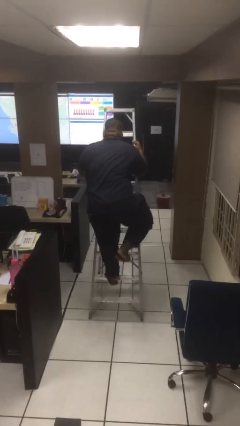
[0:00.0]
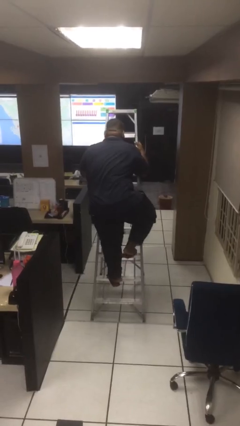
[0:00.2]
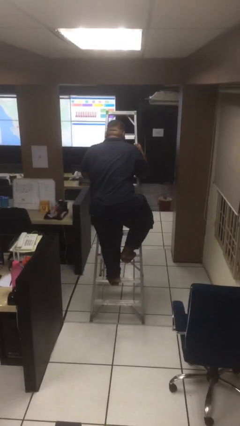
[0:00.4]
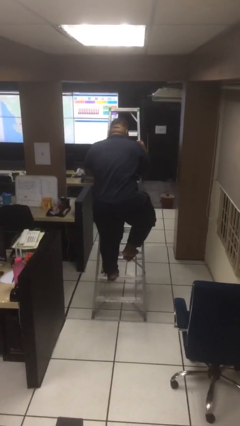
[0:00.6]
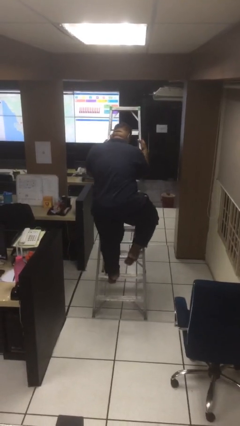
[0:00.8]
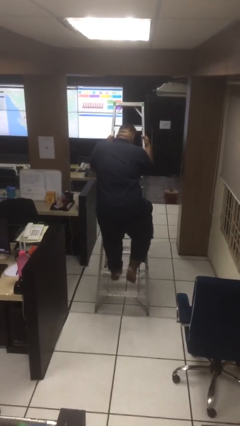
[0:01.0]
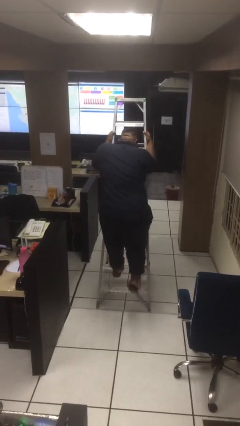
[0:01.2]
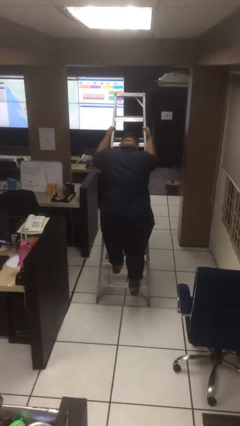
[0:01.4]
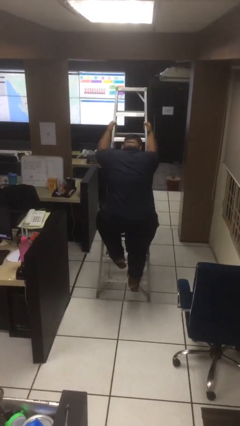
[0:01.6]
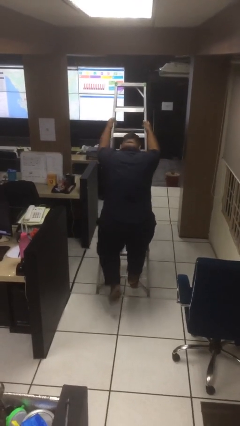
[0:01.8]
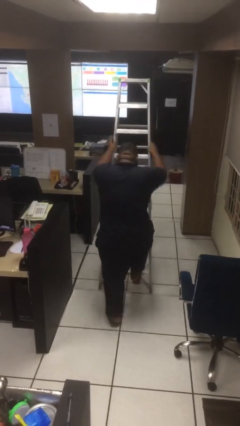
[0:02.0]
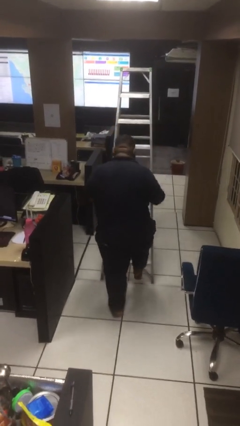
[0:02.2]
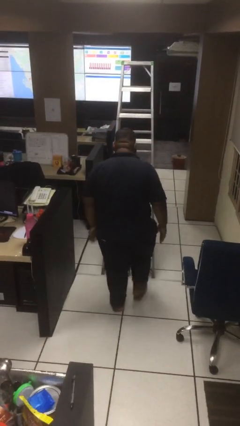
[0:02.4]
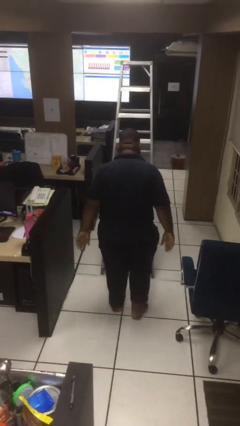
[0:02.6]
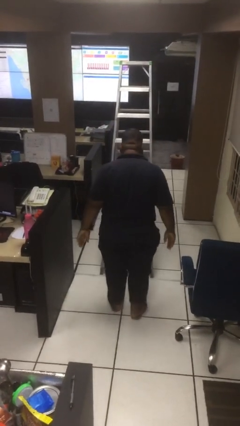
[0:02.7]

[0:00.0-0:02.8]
person climbs down ladder

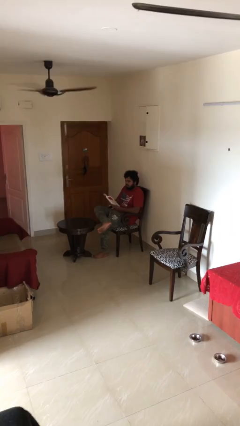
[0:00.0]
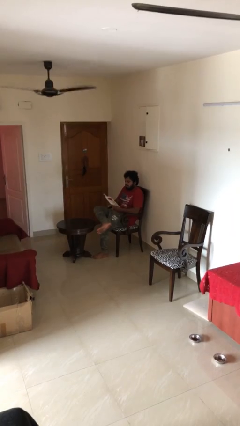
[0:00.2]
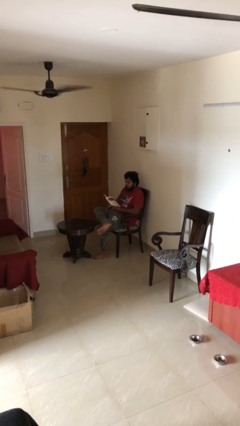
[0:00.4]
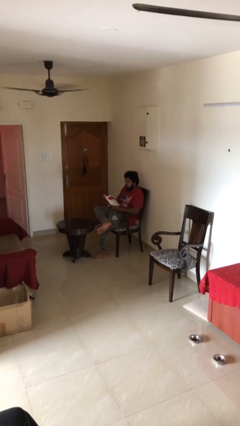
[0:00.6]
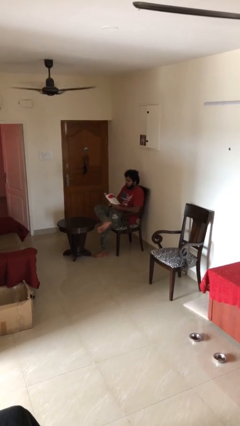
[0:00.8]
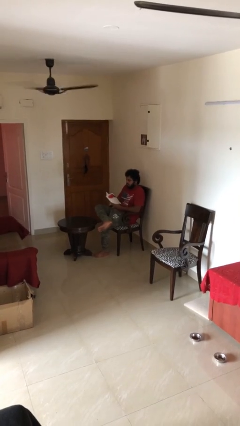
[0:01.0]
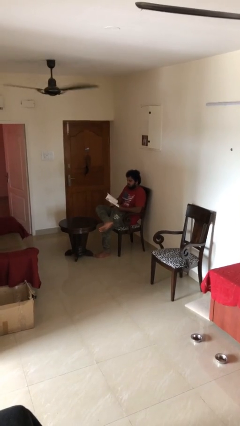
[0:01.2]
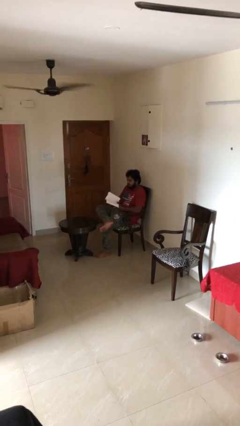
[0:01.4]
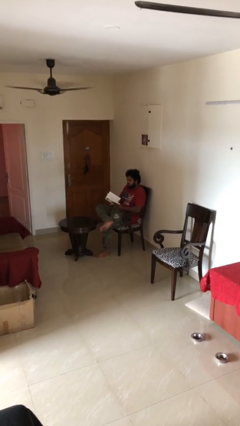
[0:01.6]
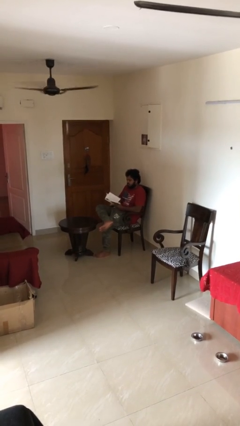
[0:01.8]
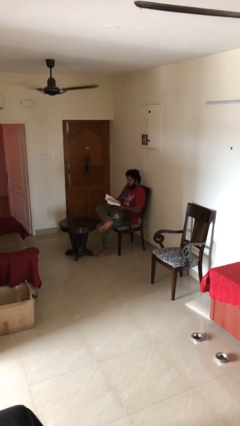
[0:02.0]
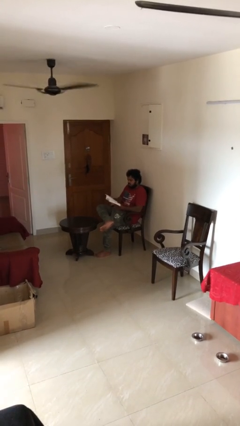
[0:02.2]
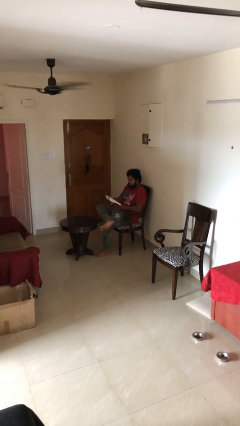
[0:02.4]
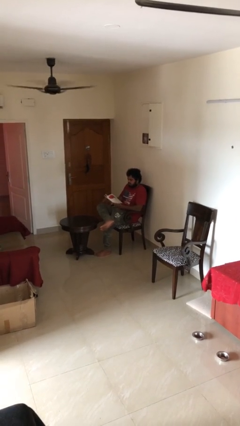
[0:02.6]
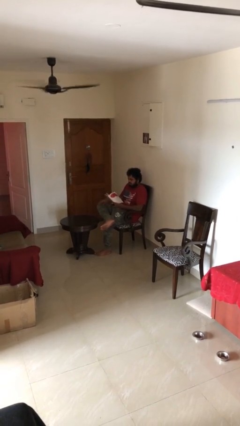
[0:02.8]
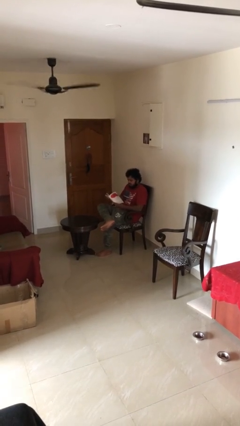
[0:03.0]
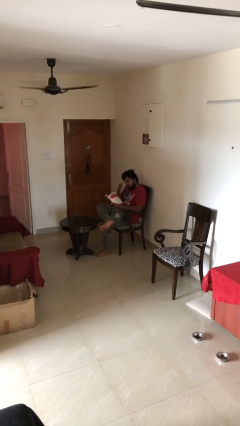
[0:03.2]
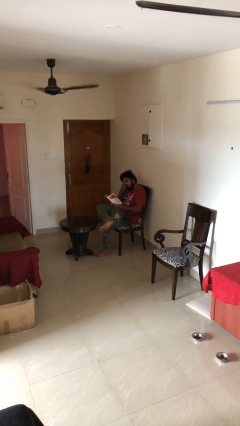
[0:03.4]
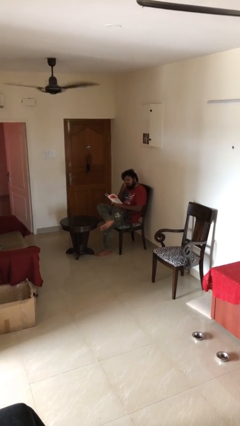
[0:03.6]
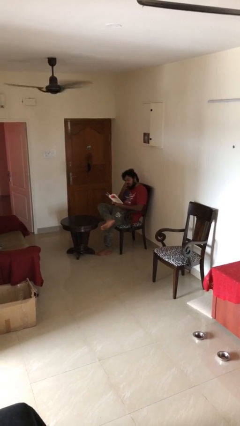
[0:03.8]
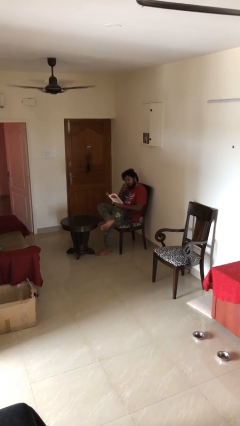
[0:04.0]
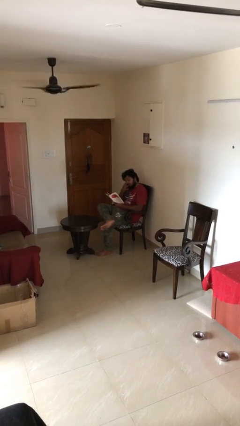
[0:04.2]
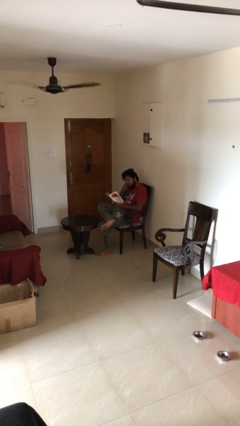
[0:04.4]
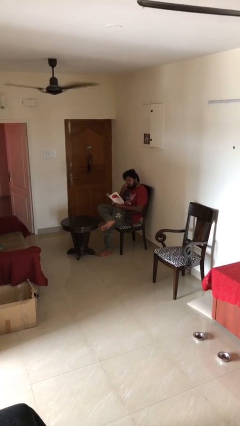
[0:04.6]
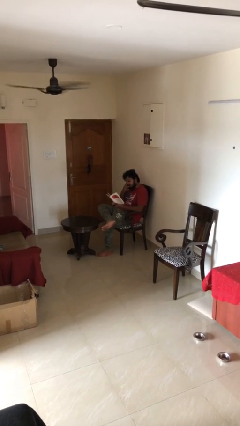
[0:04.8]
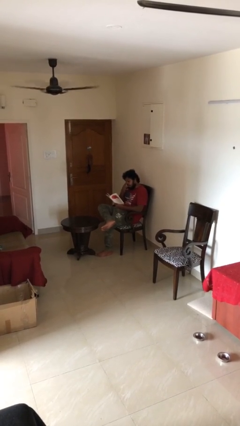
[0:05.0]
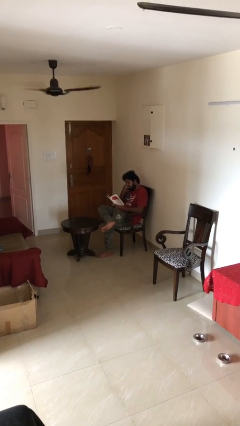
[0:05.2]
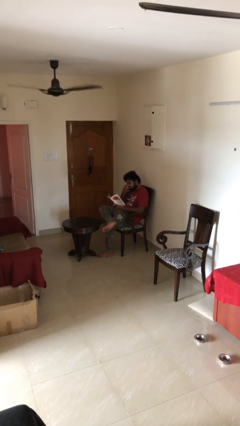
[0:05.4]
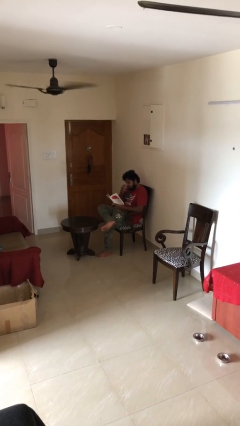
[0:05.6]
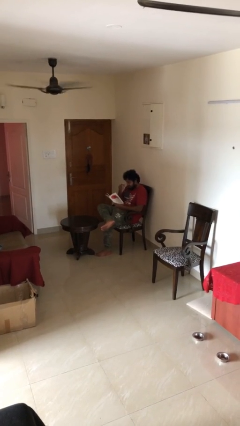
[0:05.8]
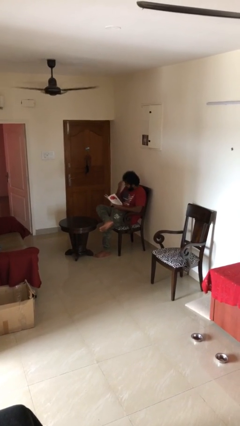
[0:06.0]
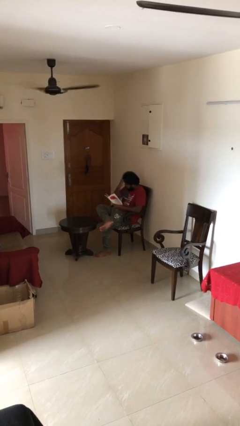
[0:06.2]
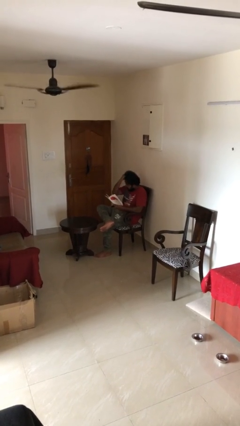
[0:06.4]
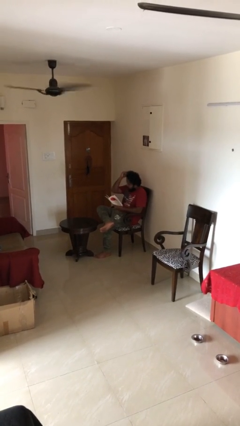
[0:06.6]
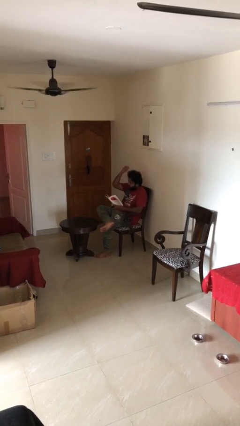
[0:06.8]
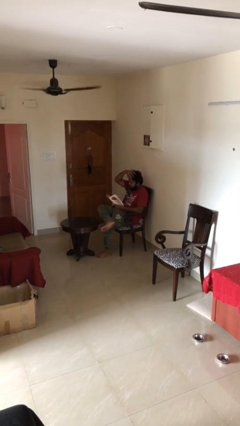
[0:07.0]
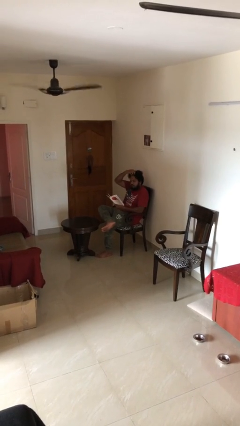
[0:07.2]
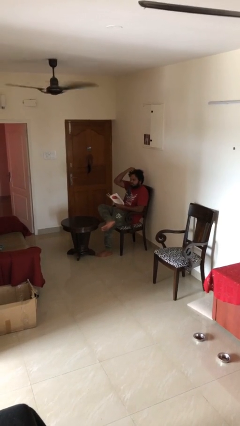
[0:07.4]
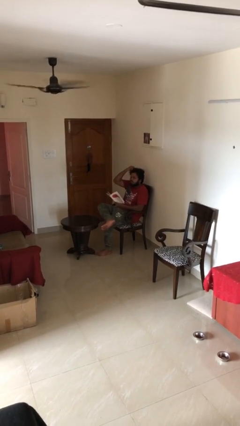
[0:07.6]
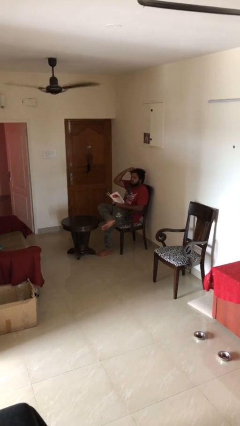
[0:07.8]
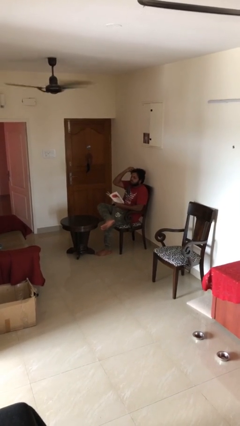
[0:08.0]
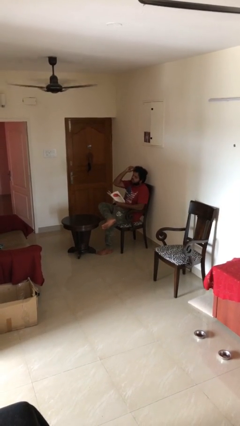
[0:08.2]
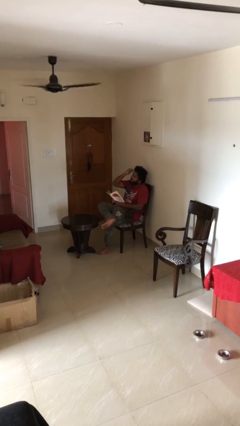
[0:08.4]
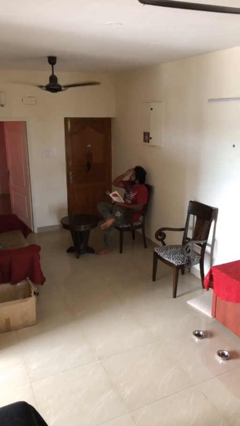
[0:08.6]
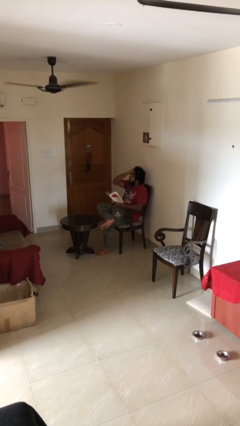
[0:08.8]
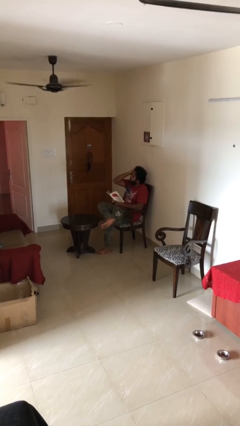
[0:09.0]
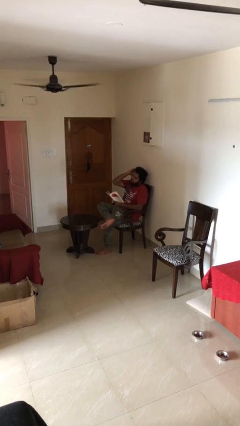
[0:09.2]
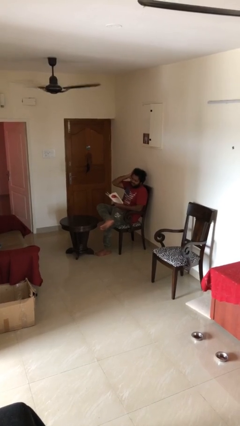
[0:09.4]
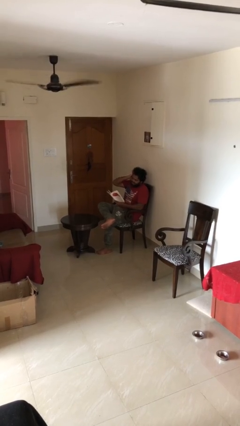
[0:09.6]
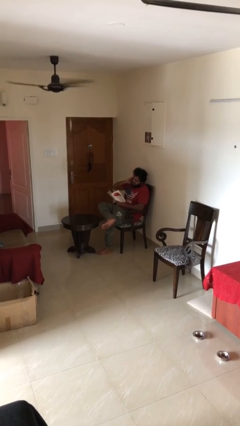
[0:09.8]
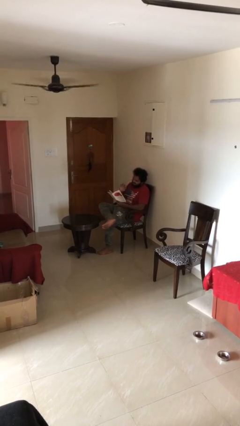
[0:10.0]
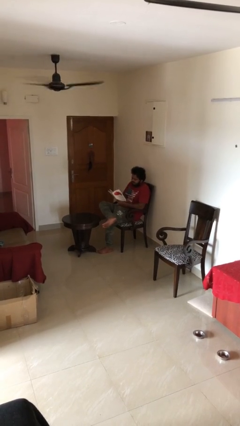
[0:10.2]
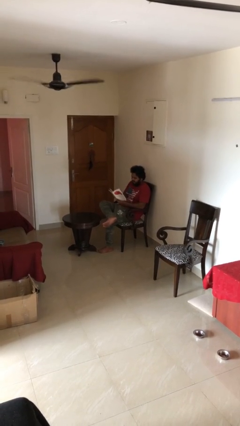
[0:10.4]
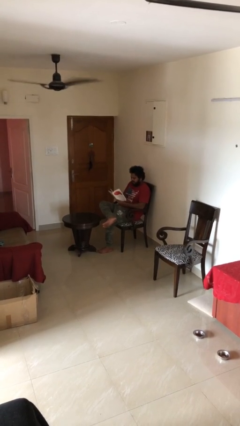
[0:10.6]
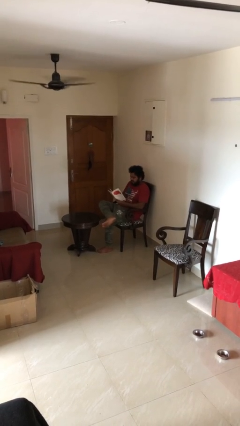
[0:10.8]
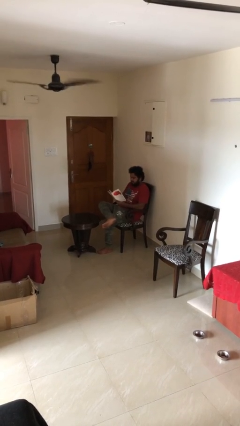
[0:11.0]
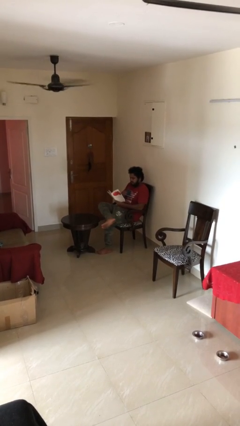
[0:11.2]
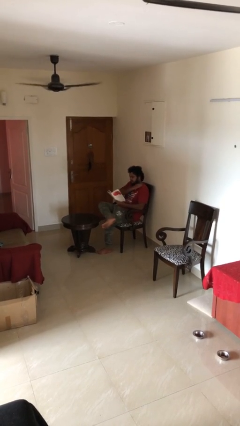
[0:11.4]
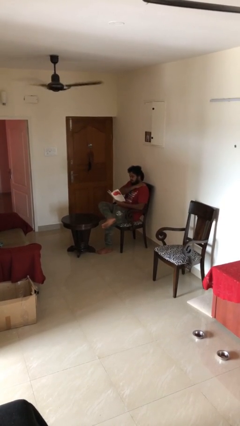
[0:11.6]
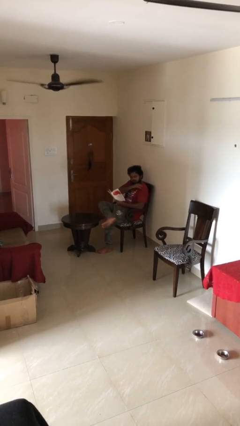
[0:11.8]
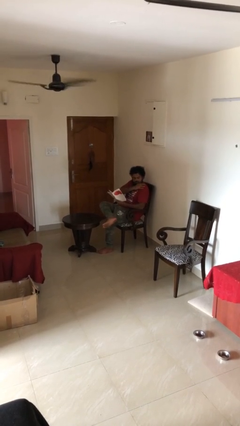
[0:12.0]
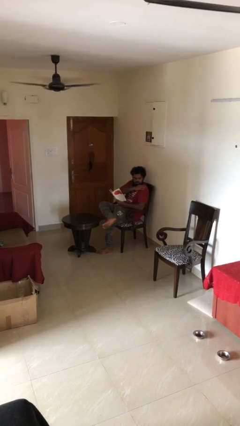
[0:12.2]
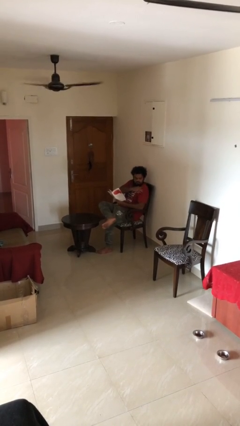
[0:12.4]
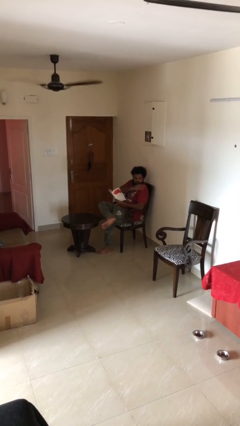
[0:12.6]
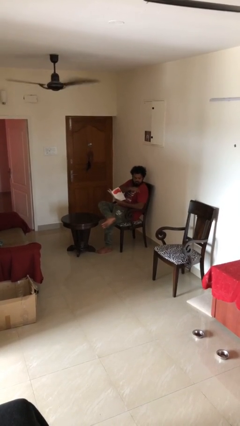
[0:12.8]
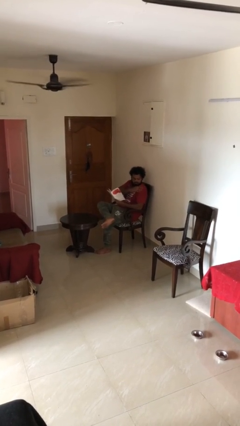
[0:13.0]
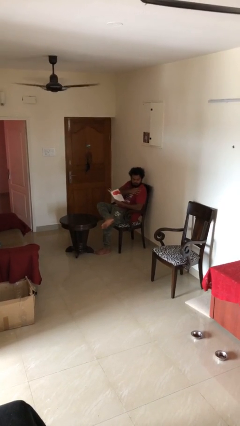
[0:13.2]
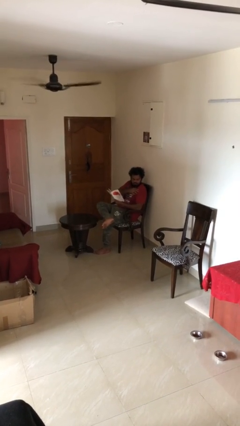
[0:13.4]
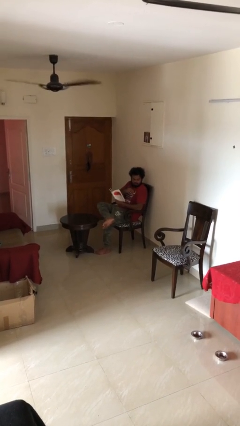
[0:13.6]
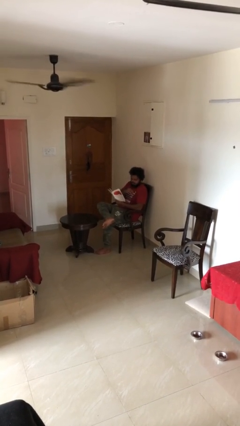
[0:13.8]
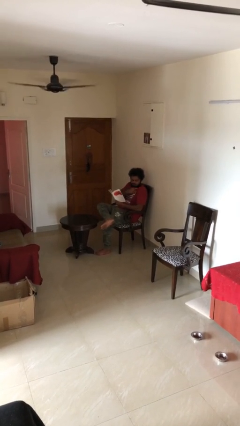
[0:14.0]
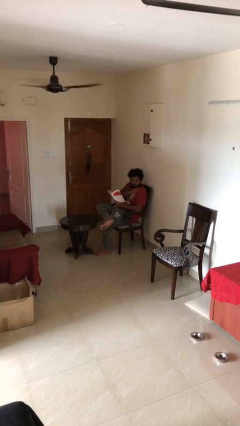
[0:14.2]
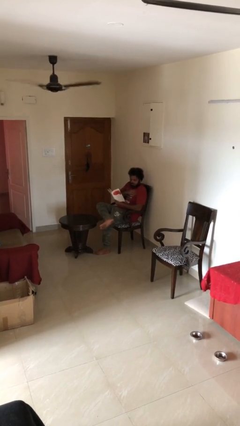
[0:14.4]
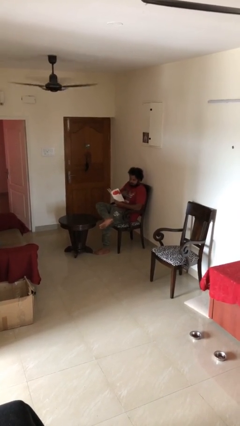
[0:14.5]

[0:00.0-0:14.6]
person reads document

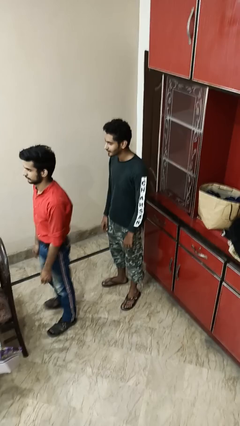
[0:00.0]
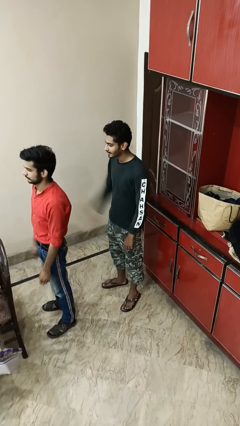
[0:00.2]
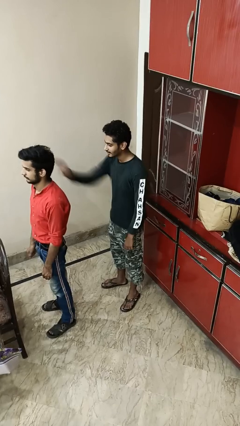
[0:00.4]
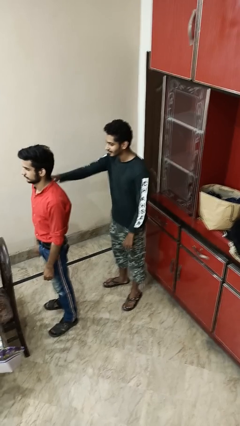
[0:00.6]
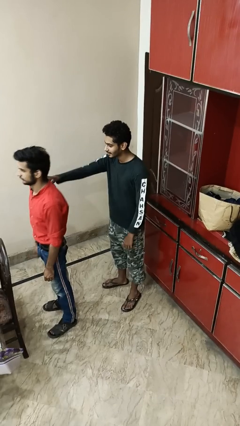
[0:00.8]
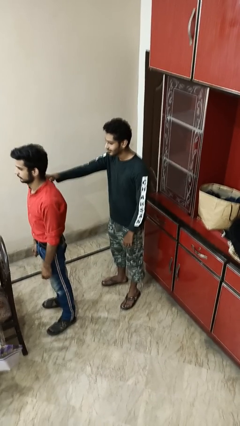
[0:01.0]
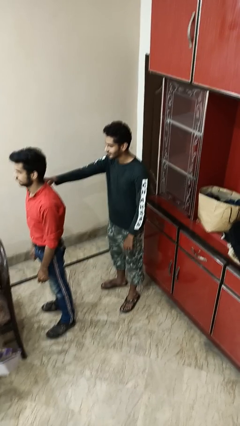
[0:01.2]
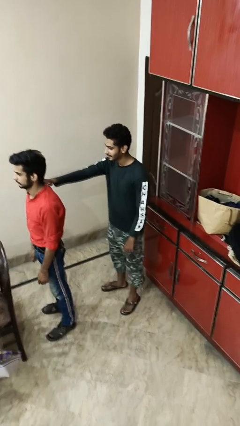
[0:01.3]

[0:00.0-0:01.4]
person grabs person by shoulder
